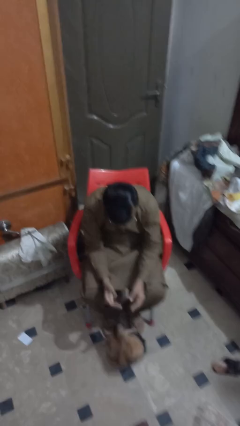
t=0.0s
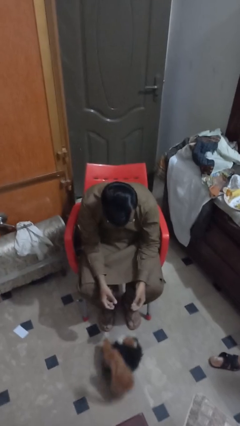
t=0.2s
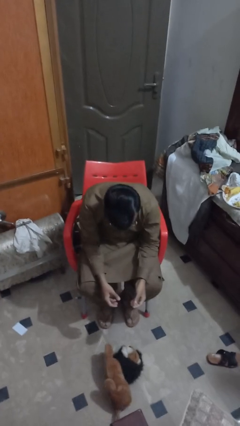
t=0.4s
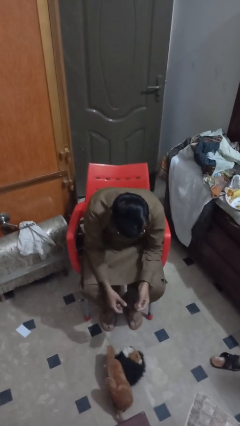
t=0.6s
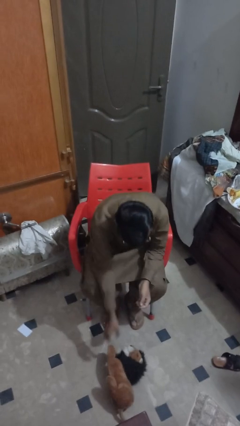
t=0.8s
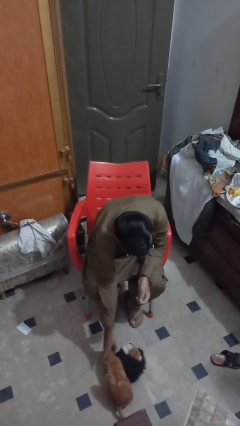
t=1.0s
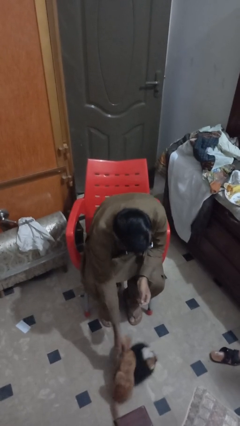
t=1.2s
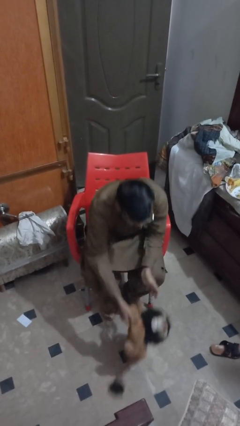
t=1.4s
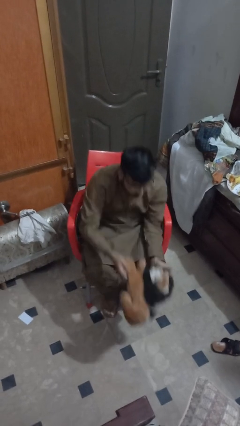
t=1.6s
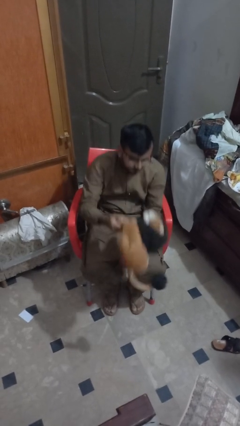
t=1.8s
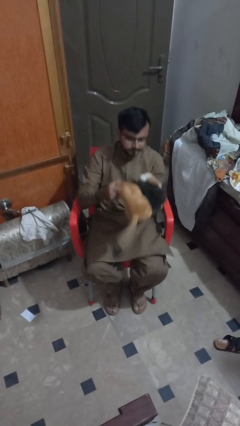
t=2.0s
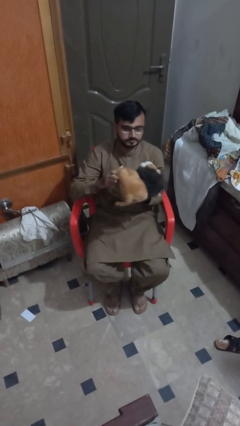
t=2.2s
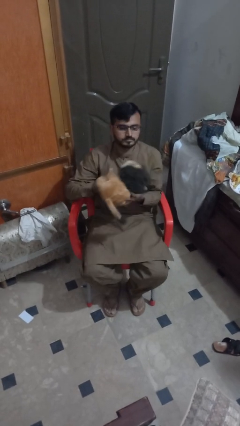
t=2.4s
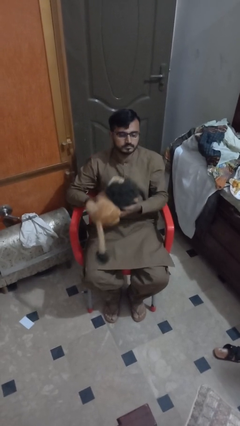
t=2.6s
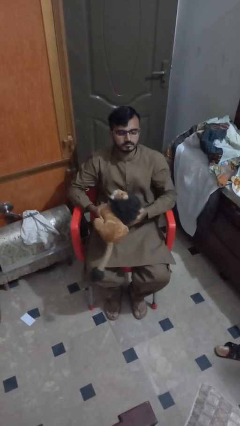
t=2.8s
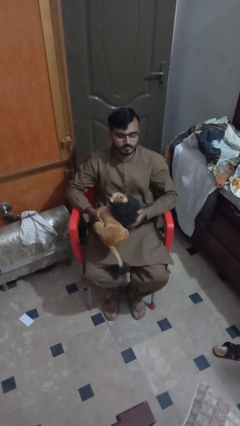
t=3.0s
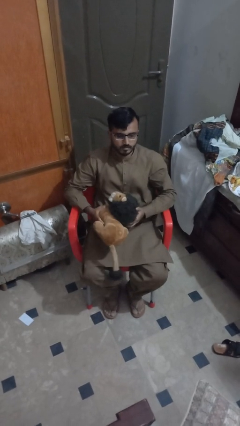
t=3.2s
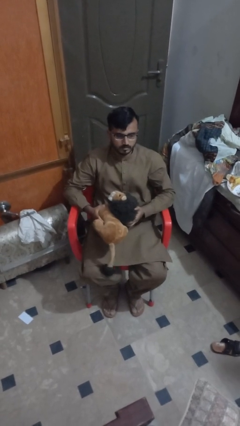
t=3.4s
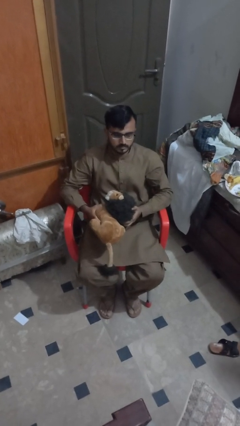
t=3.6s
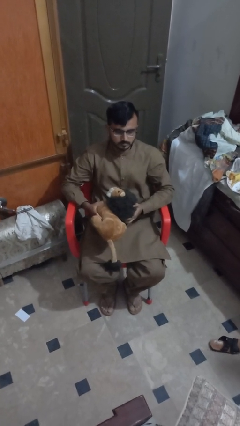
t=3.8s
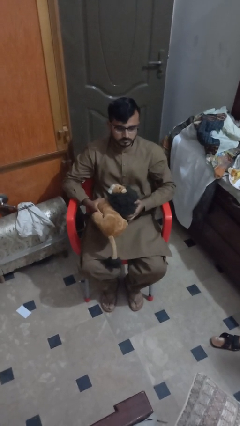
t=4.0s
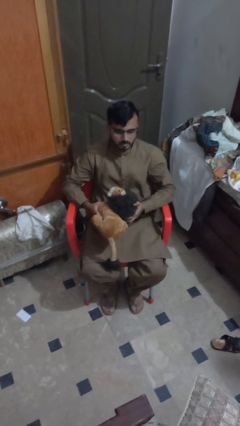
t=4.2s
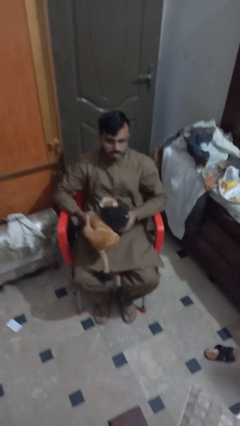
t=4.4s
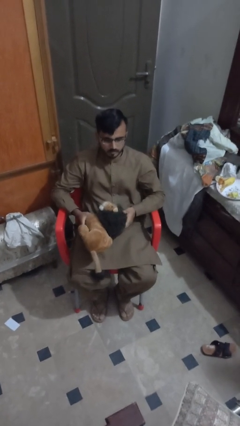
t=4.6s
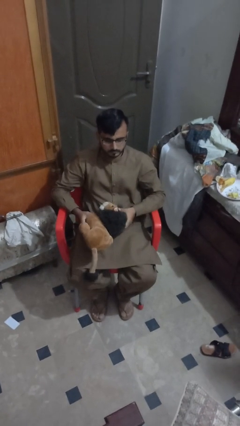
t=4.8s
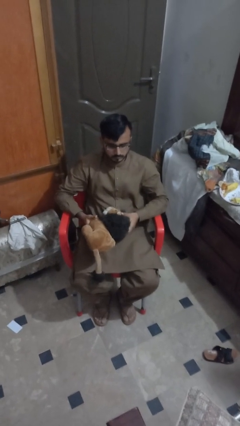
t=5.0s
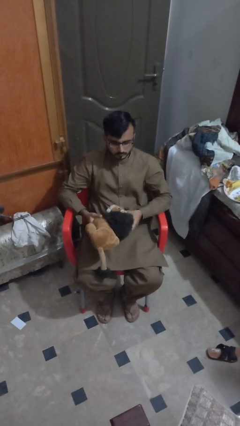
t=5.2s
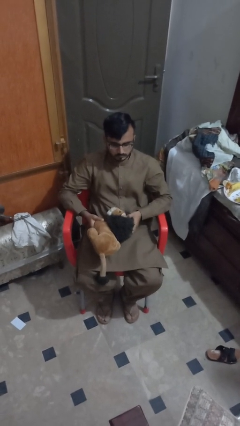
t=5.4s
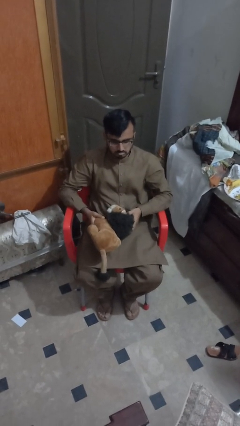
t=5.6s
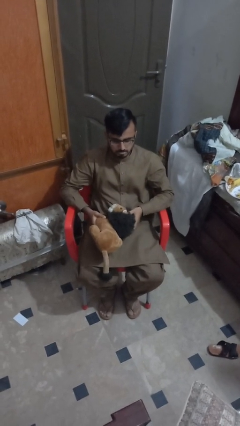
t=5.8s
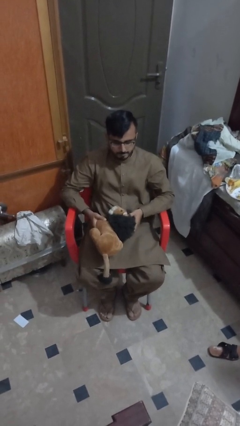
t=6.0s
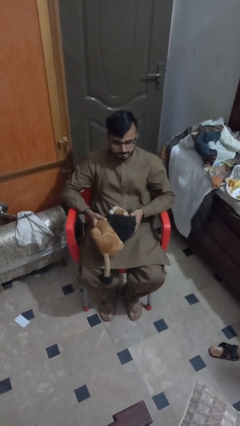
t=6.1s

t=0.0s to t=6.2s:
person picks up object from floor

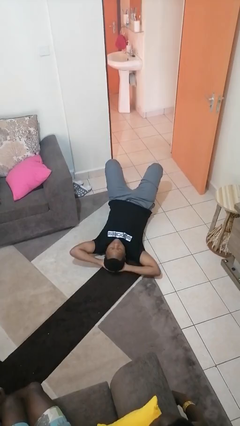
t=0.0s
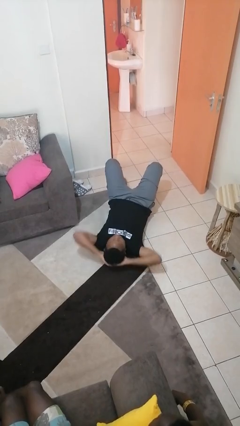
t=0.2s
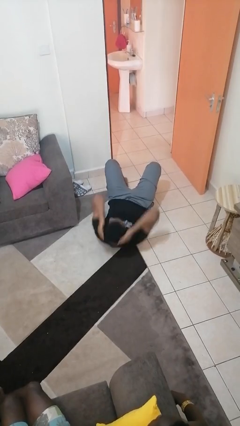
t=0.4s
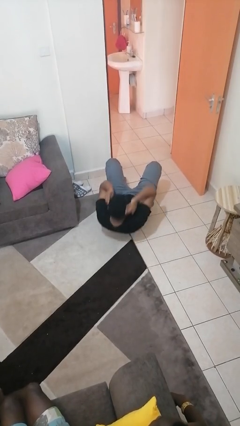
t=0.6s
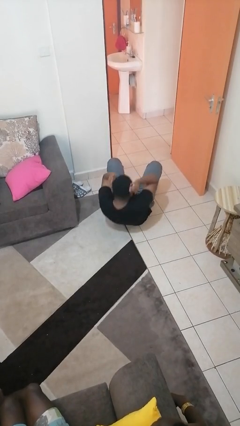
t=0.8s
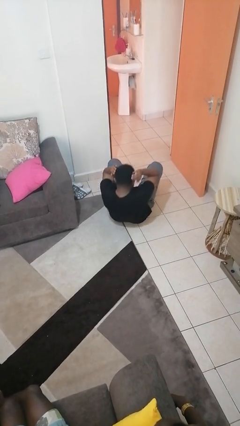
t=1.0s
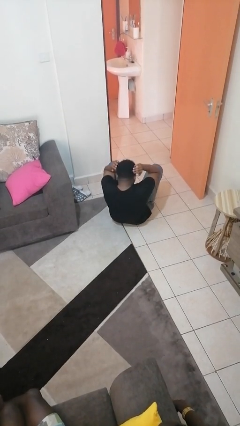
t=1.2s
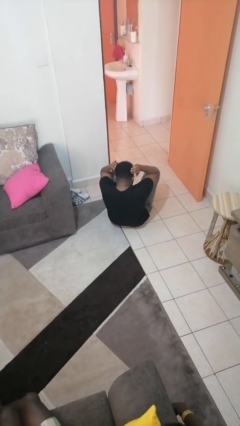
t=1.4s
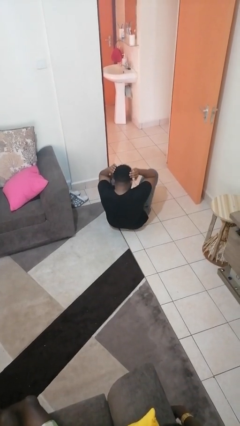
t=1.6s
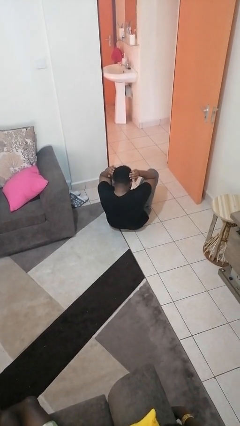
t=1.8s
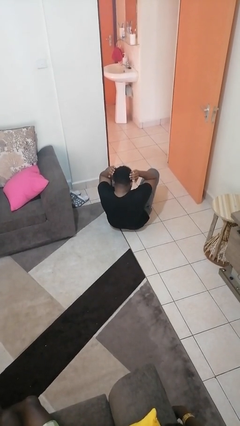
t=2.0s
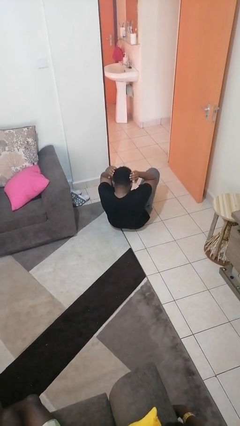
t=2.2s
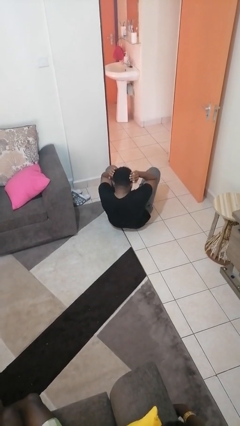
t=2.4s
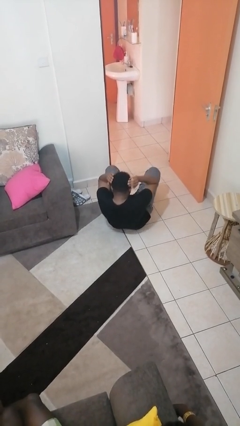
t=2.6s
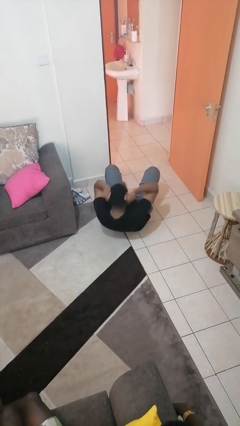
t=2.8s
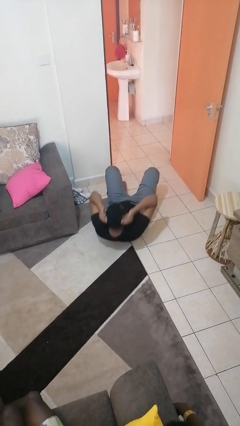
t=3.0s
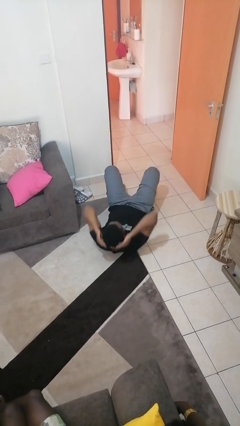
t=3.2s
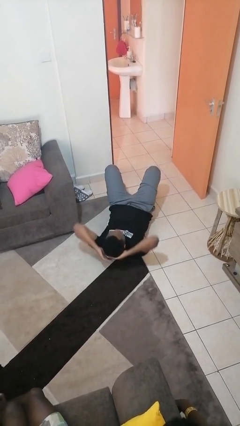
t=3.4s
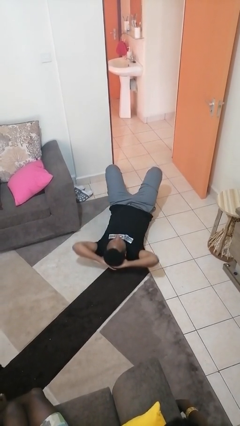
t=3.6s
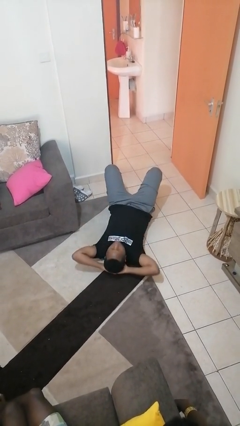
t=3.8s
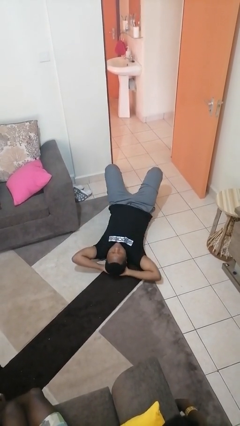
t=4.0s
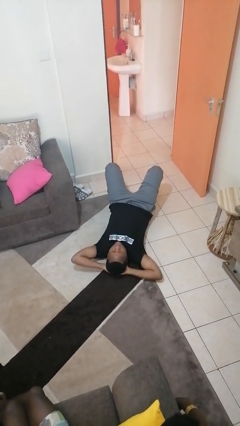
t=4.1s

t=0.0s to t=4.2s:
person exercises with situp

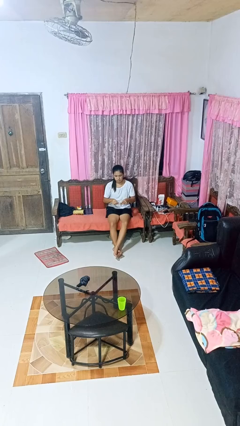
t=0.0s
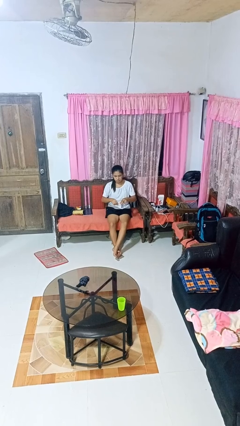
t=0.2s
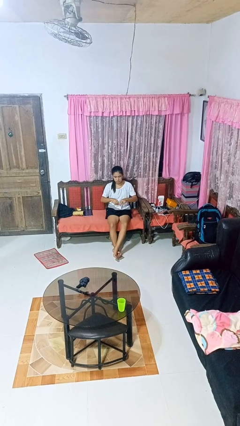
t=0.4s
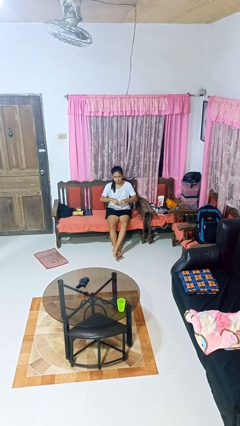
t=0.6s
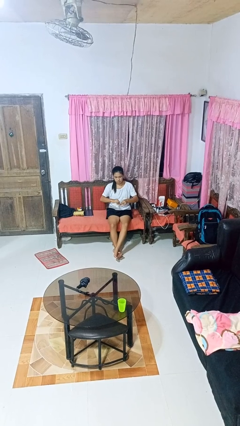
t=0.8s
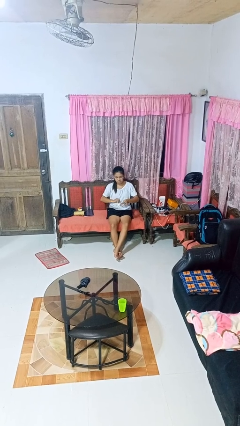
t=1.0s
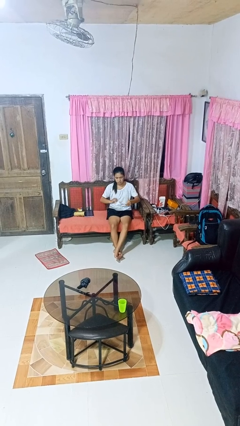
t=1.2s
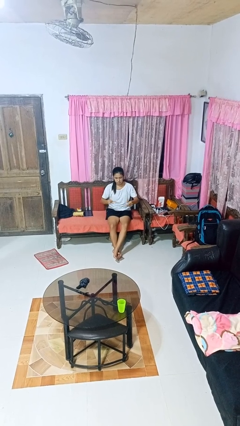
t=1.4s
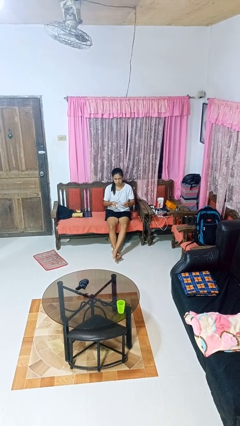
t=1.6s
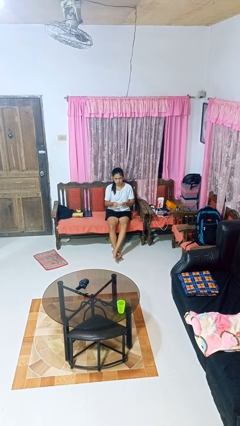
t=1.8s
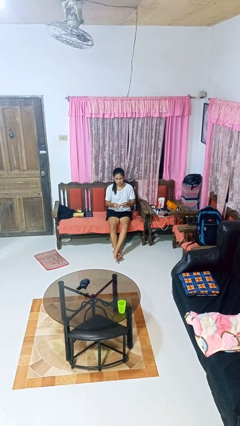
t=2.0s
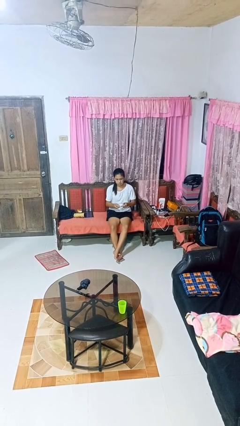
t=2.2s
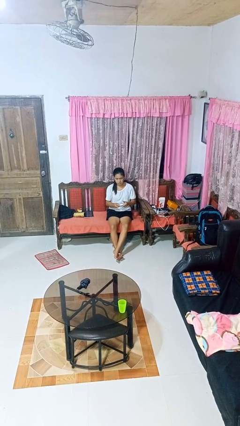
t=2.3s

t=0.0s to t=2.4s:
person tears paper

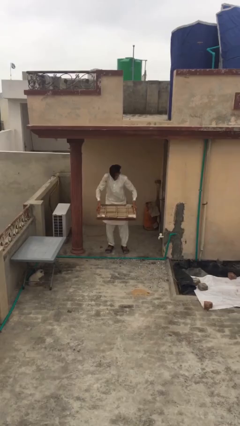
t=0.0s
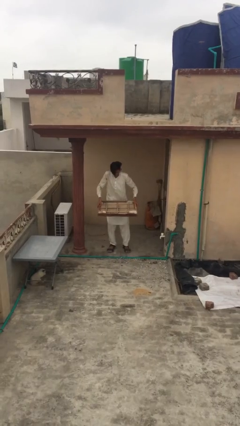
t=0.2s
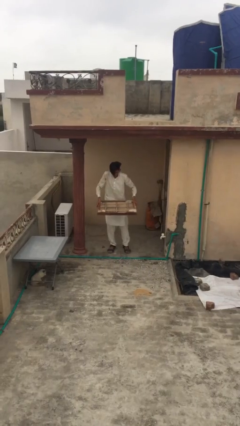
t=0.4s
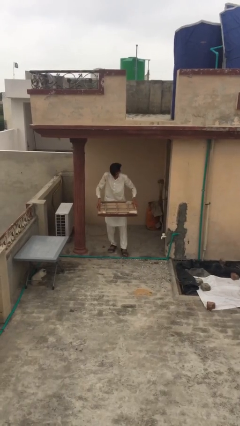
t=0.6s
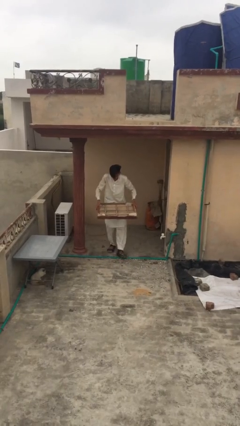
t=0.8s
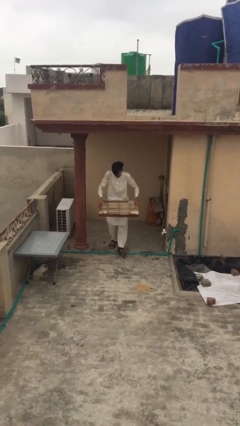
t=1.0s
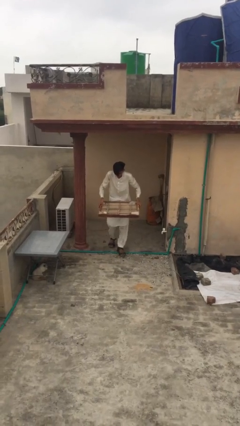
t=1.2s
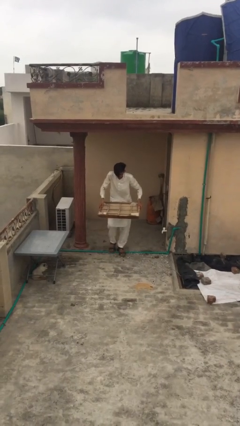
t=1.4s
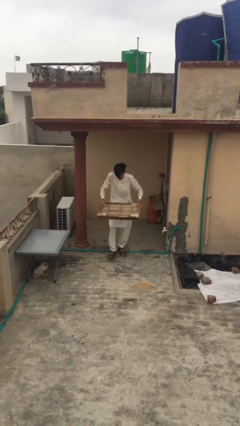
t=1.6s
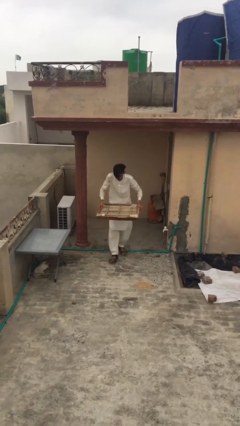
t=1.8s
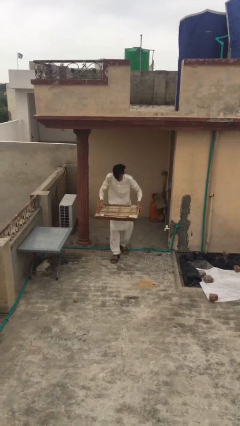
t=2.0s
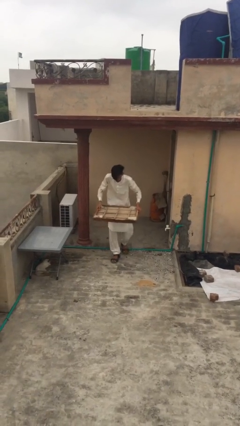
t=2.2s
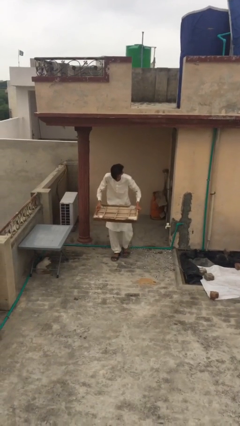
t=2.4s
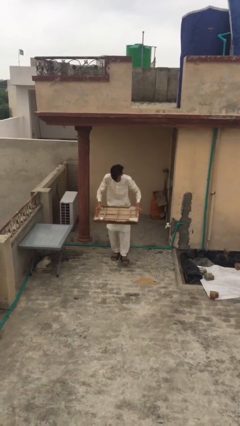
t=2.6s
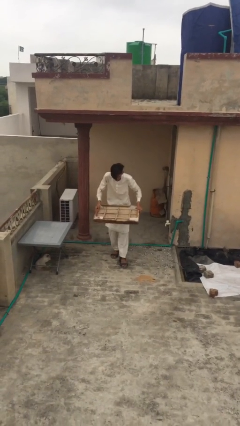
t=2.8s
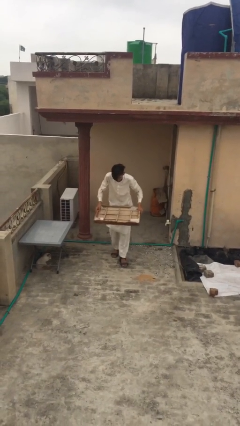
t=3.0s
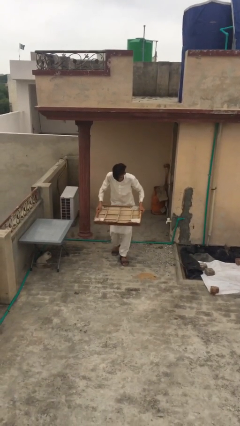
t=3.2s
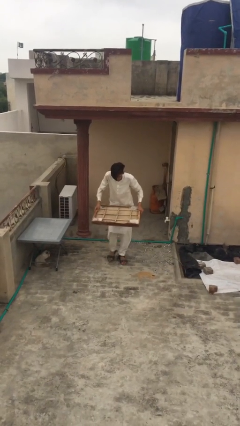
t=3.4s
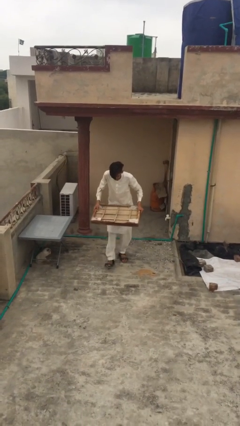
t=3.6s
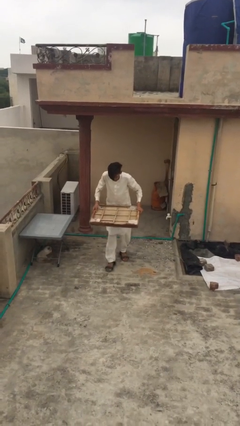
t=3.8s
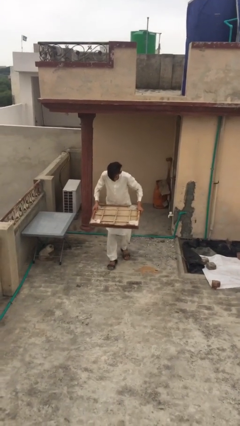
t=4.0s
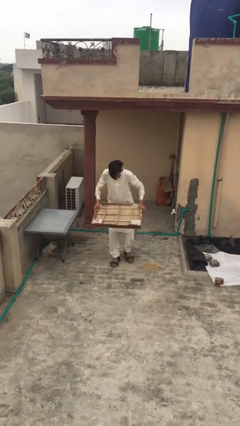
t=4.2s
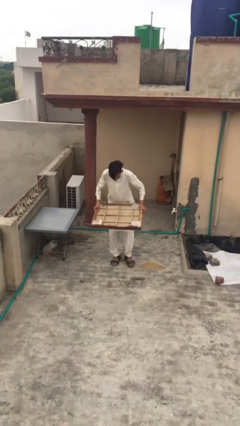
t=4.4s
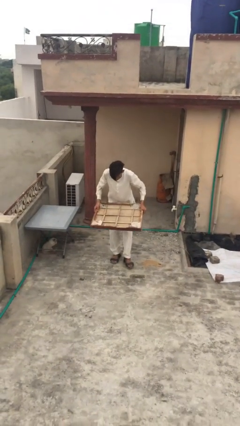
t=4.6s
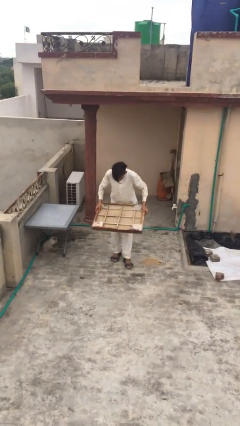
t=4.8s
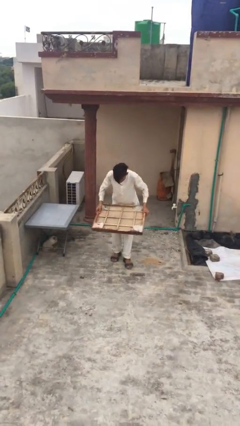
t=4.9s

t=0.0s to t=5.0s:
person carries heavy object
